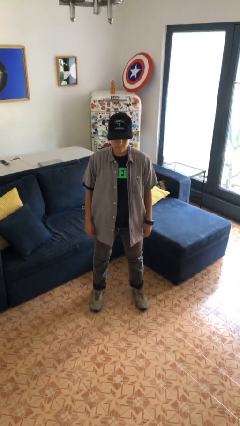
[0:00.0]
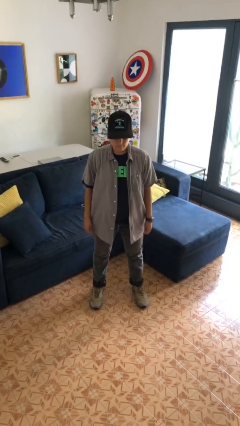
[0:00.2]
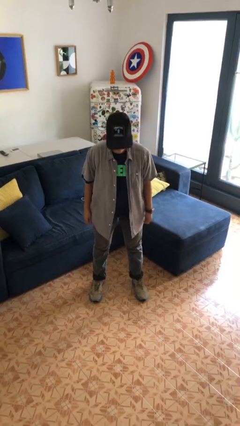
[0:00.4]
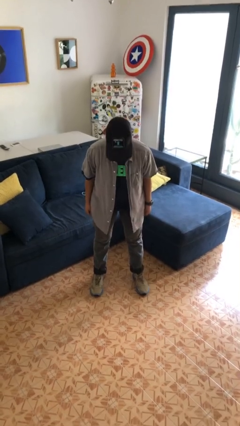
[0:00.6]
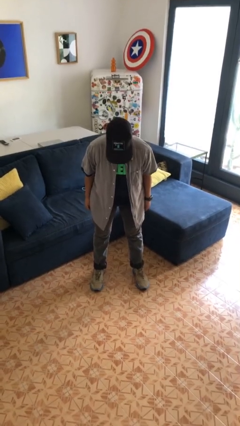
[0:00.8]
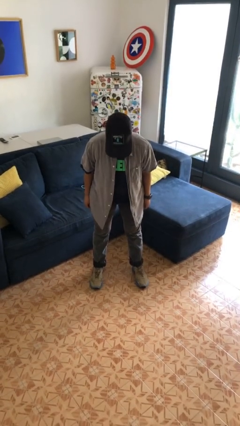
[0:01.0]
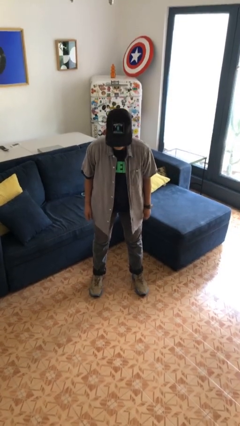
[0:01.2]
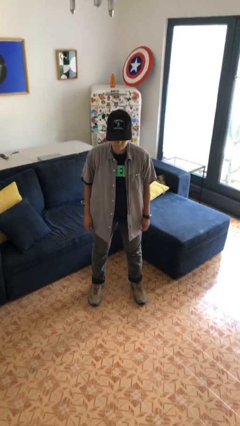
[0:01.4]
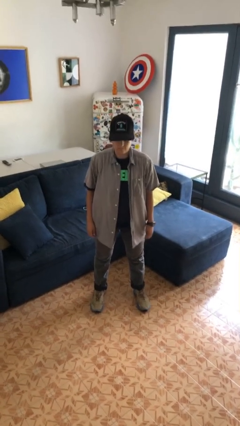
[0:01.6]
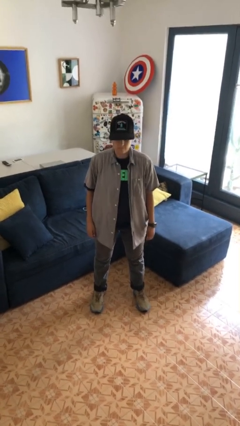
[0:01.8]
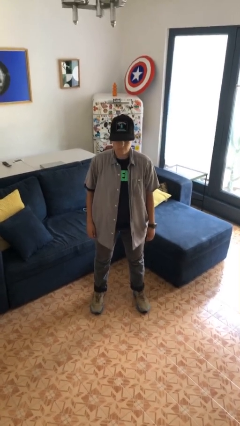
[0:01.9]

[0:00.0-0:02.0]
person bows

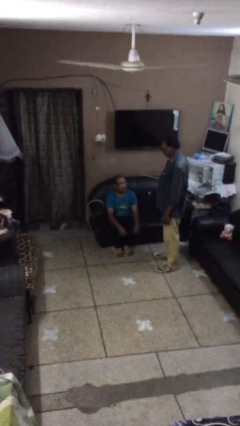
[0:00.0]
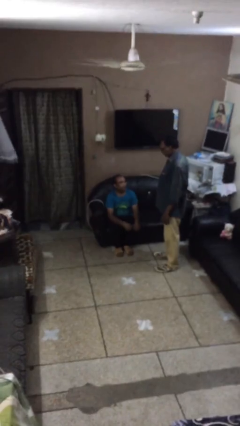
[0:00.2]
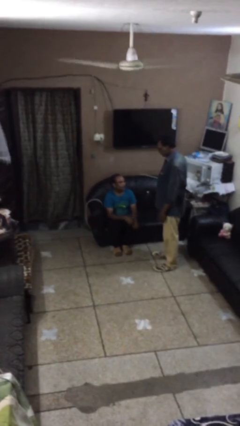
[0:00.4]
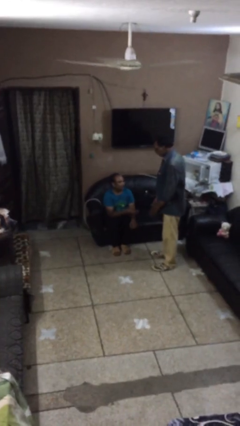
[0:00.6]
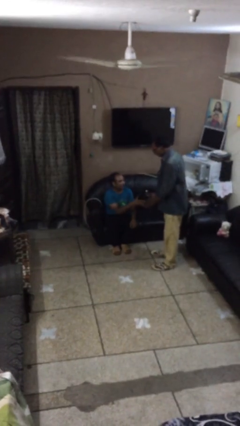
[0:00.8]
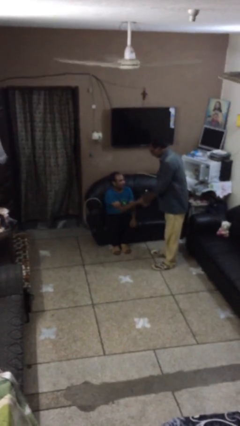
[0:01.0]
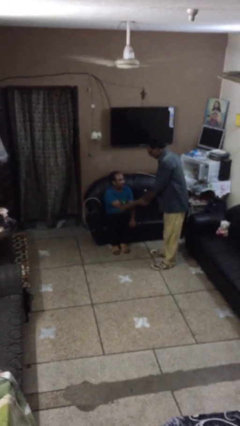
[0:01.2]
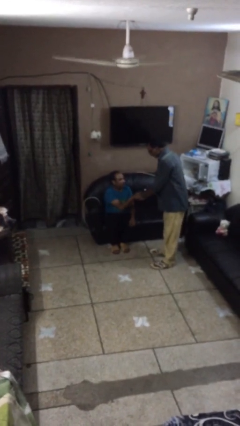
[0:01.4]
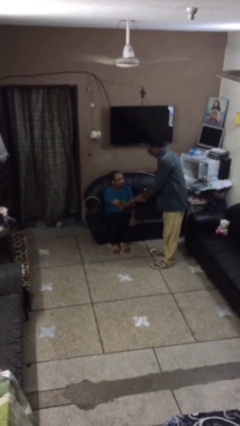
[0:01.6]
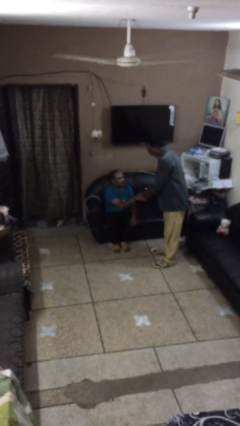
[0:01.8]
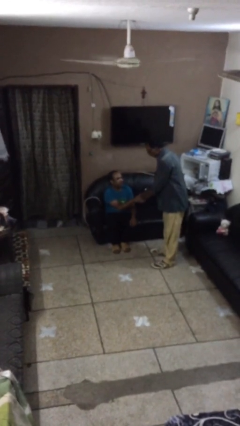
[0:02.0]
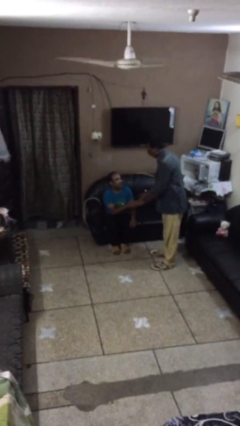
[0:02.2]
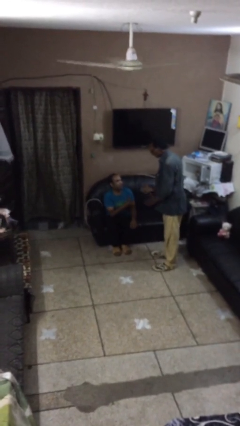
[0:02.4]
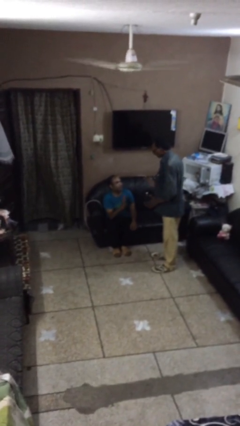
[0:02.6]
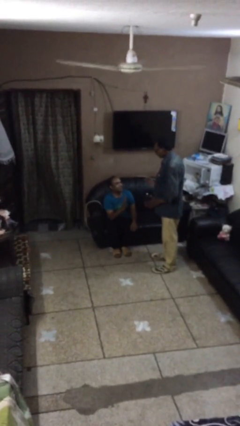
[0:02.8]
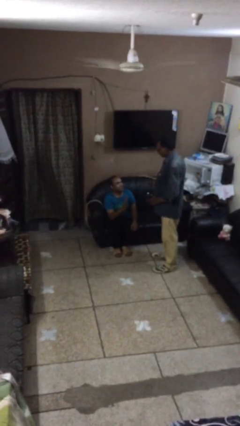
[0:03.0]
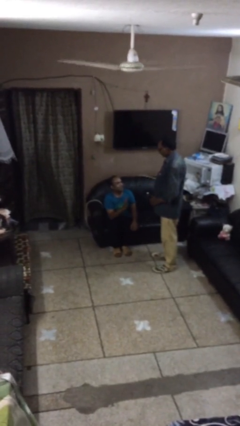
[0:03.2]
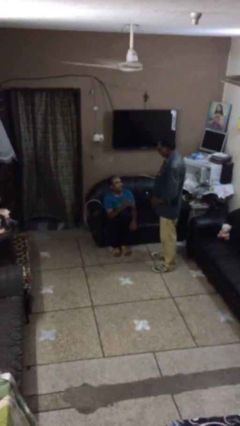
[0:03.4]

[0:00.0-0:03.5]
person shakes hand

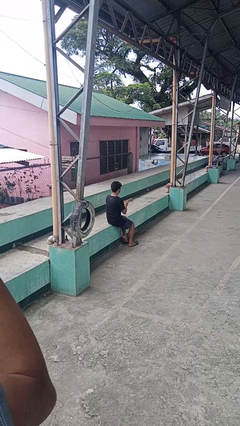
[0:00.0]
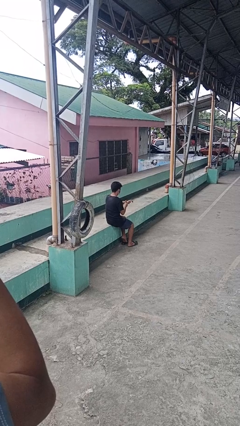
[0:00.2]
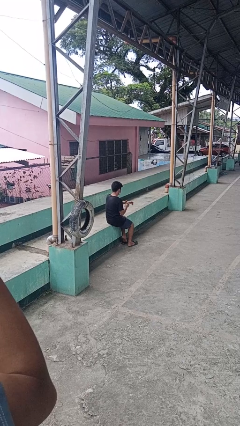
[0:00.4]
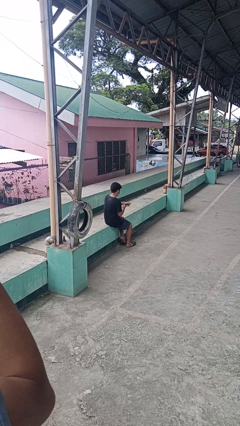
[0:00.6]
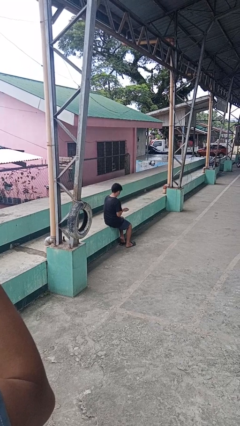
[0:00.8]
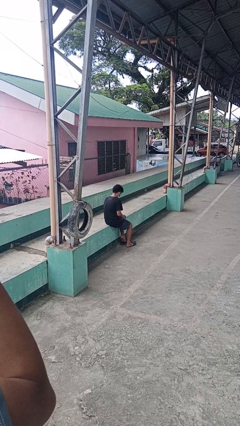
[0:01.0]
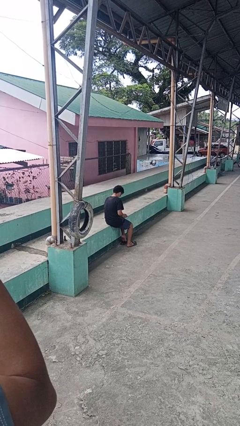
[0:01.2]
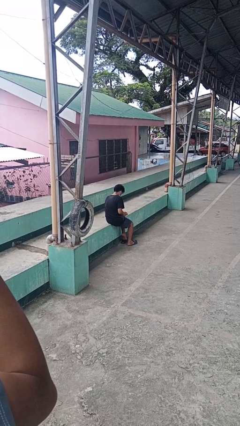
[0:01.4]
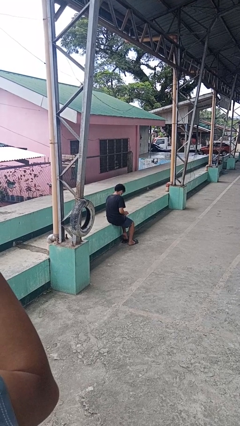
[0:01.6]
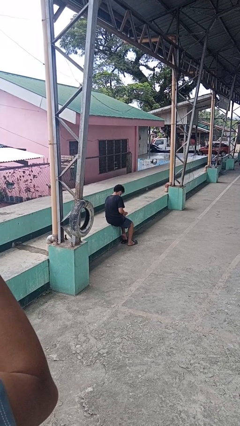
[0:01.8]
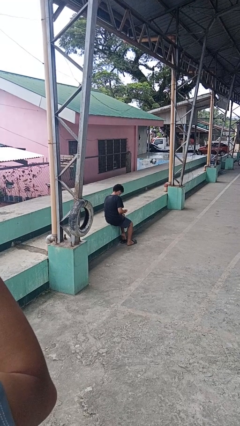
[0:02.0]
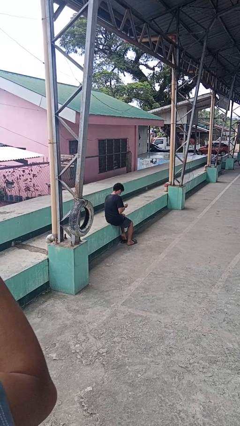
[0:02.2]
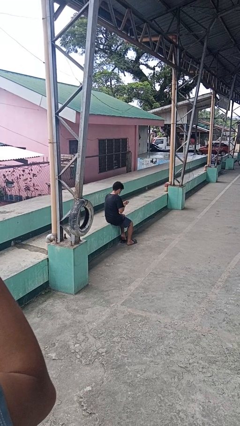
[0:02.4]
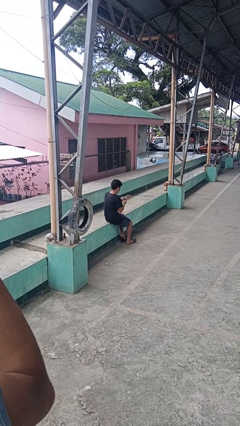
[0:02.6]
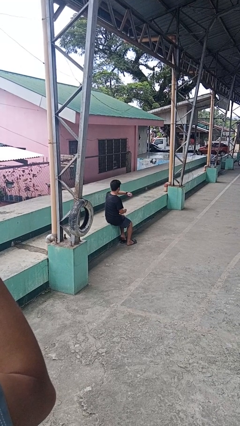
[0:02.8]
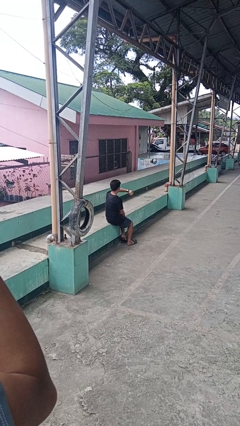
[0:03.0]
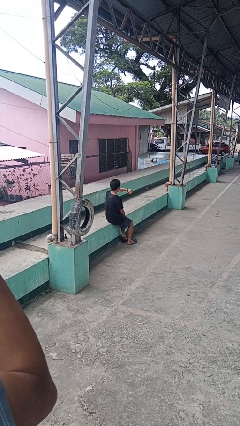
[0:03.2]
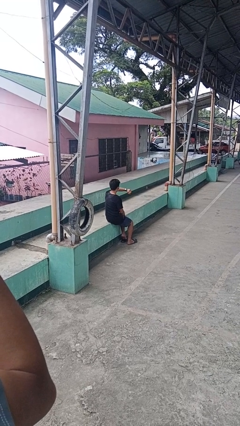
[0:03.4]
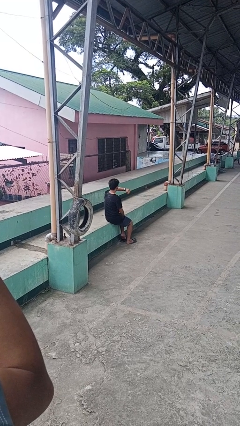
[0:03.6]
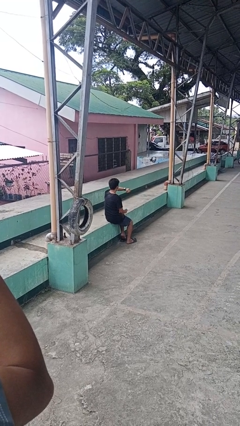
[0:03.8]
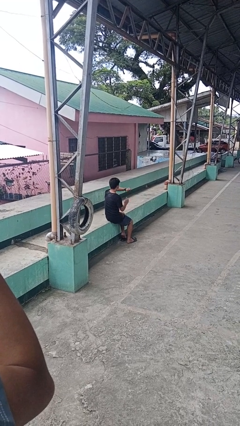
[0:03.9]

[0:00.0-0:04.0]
person puts on wristwatch

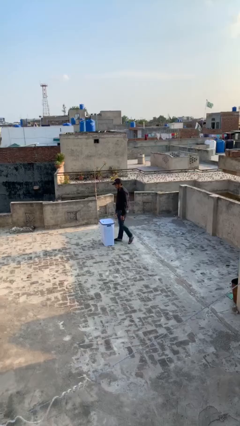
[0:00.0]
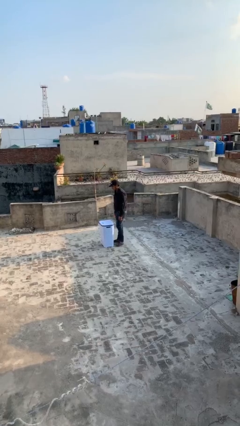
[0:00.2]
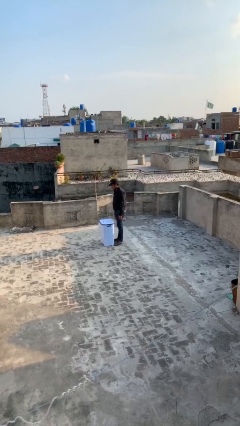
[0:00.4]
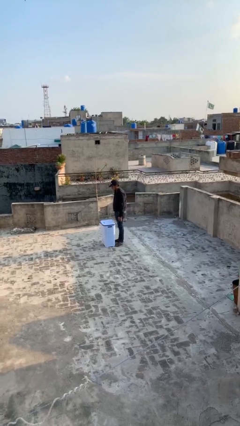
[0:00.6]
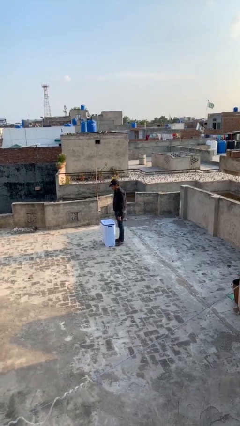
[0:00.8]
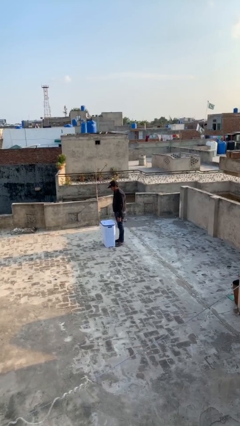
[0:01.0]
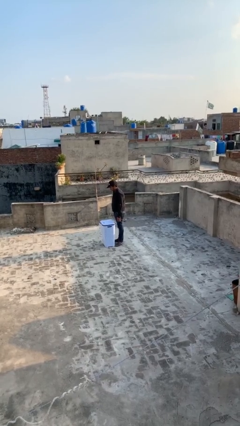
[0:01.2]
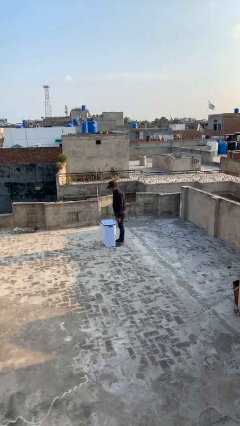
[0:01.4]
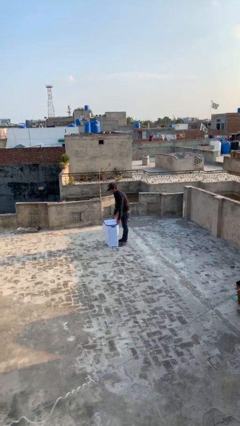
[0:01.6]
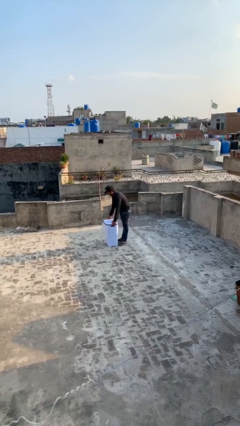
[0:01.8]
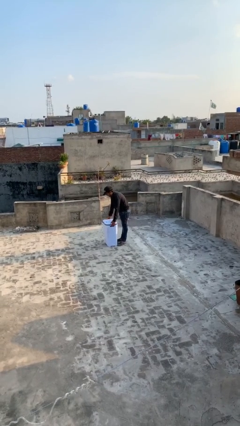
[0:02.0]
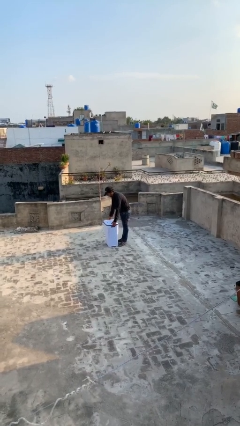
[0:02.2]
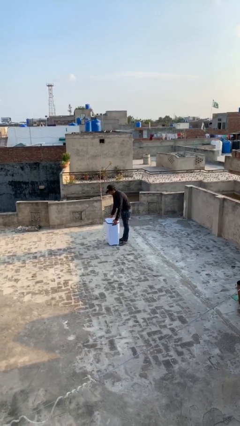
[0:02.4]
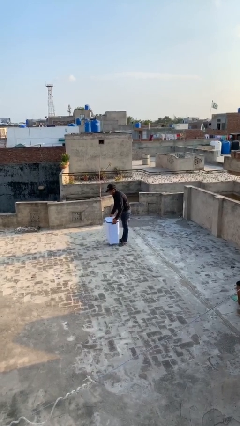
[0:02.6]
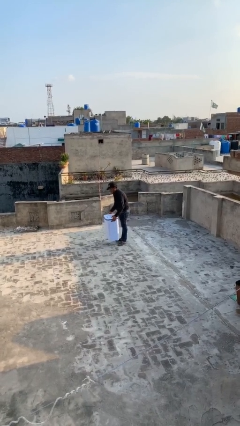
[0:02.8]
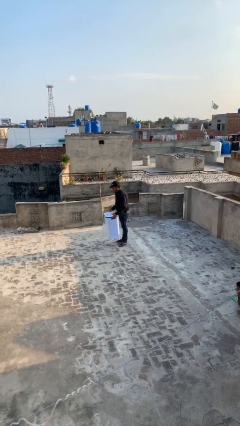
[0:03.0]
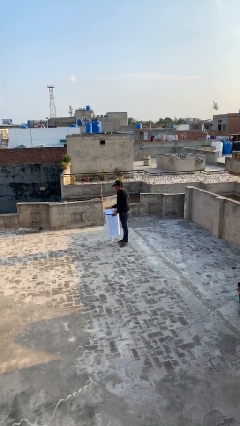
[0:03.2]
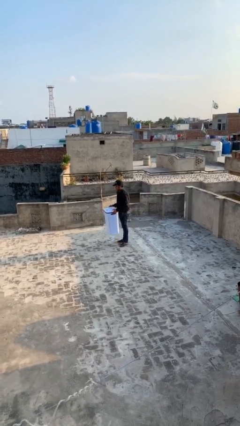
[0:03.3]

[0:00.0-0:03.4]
person picks up object from floor

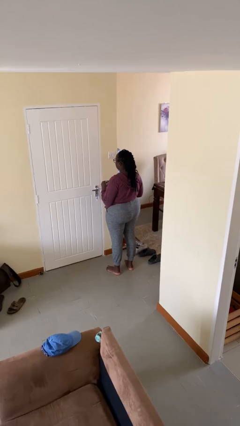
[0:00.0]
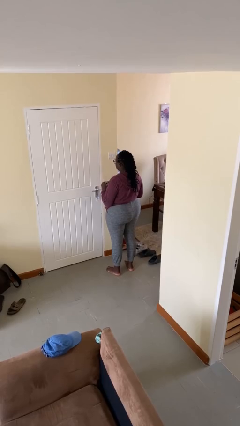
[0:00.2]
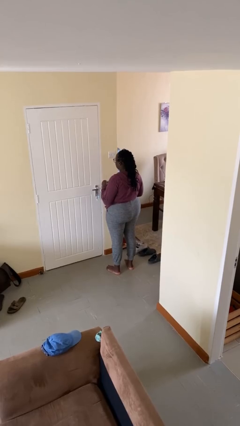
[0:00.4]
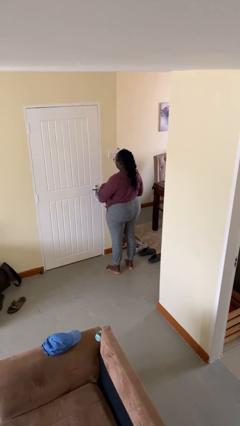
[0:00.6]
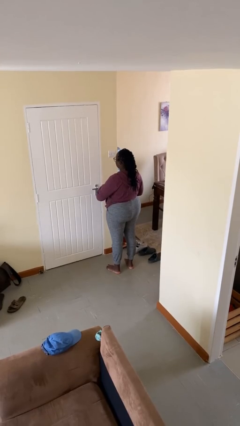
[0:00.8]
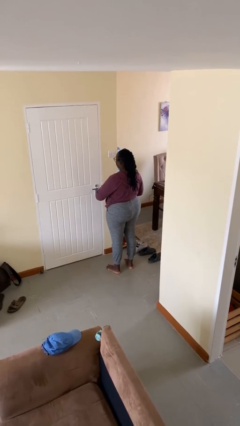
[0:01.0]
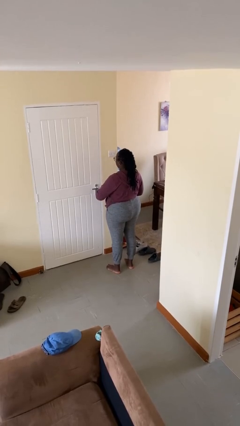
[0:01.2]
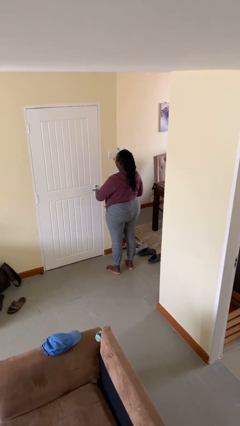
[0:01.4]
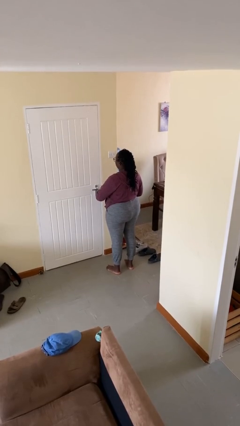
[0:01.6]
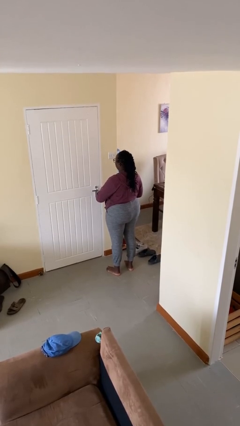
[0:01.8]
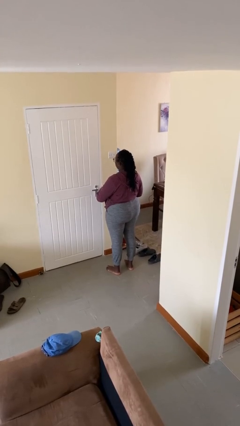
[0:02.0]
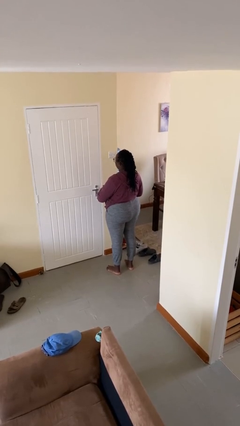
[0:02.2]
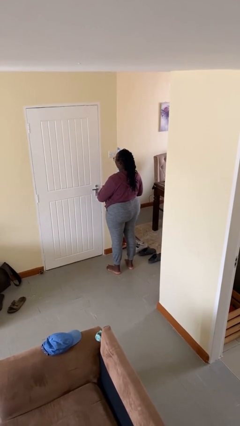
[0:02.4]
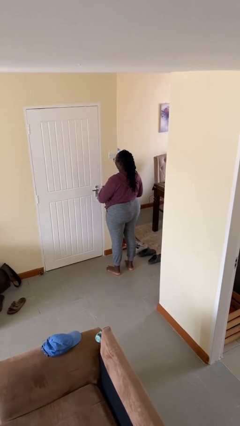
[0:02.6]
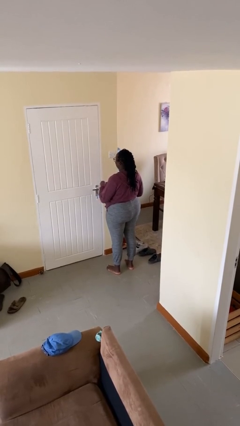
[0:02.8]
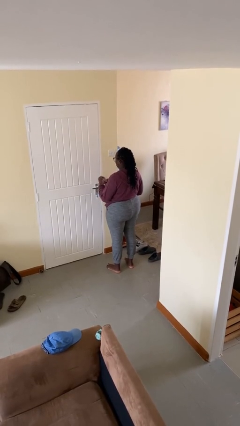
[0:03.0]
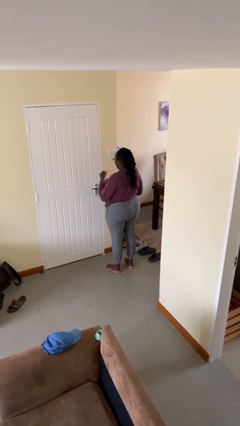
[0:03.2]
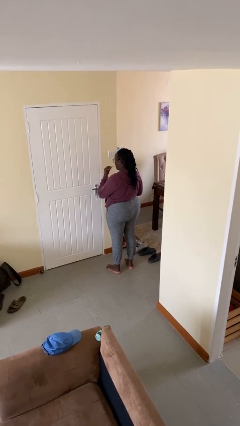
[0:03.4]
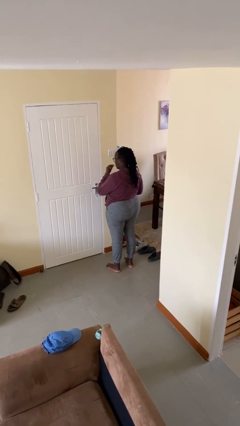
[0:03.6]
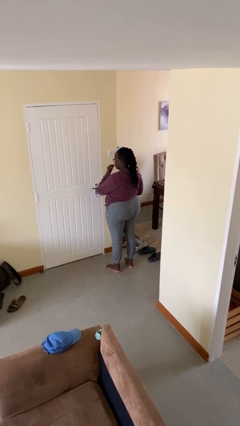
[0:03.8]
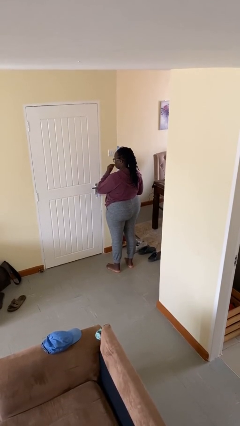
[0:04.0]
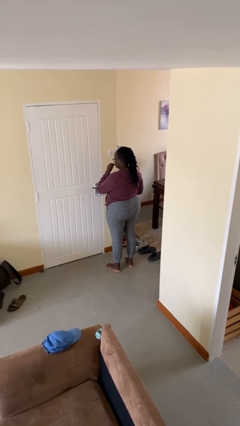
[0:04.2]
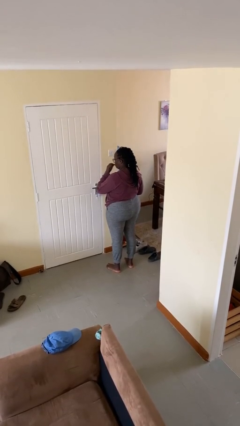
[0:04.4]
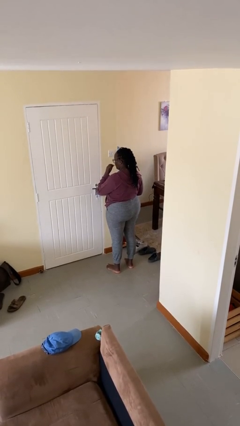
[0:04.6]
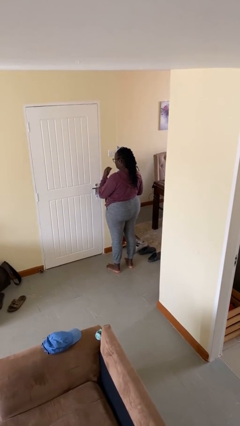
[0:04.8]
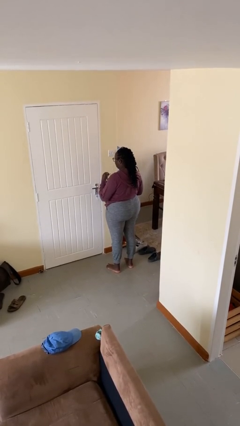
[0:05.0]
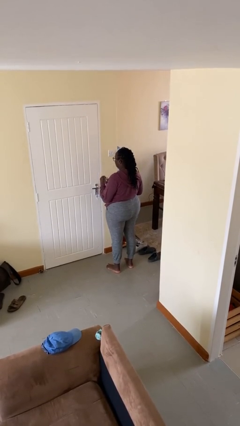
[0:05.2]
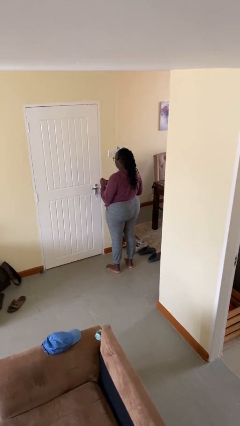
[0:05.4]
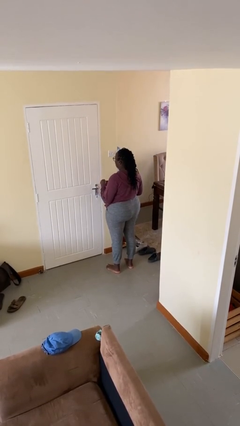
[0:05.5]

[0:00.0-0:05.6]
person eats snack from bag
